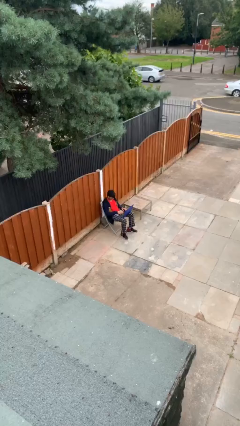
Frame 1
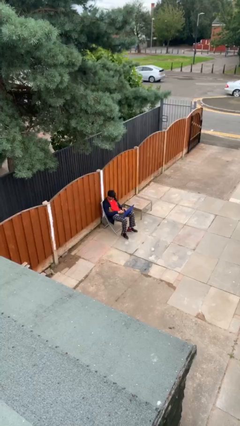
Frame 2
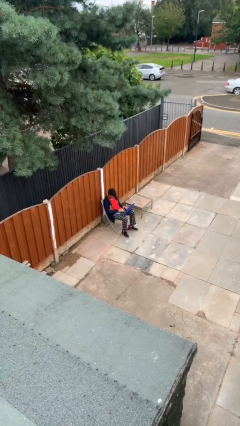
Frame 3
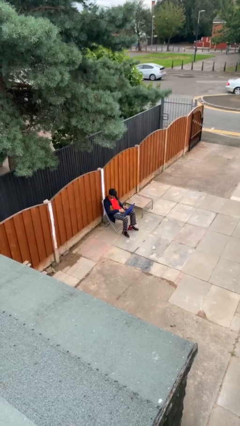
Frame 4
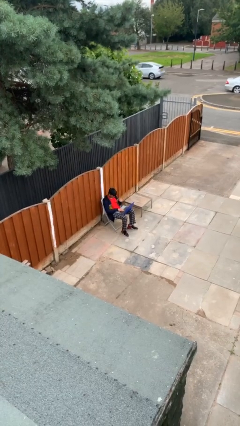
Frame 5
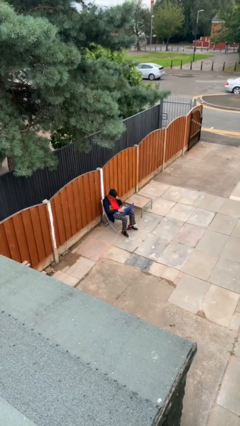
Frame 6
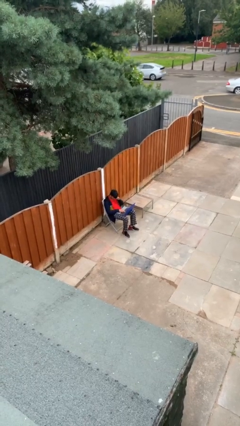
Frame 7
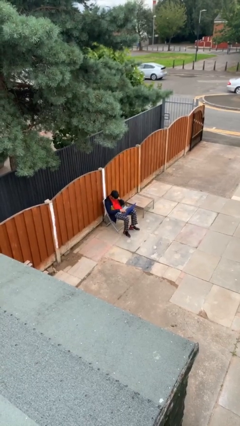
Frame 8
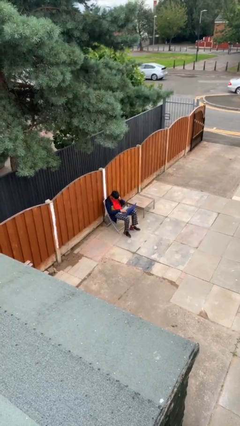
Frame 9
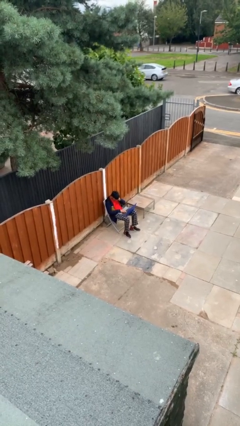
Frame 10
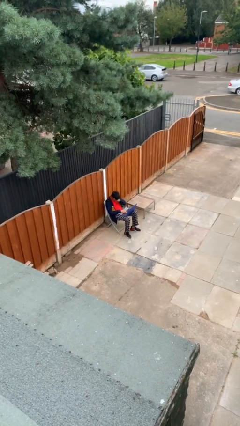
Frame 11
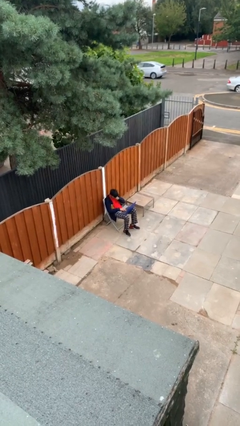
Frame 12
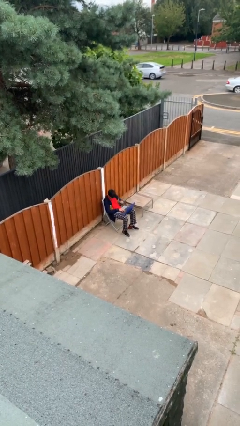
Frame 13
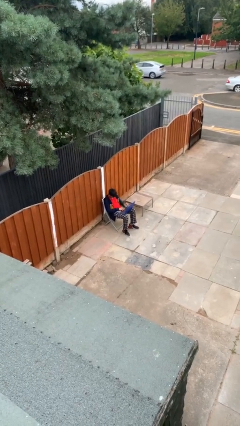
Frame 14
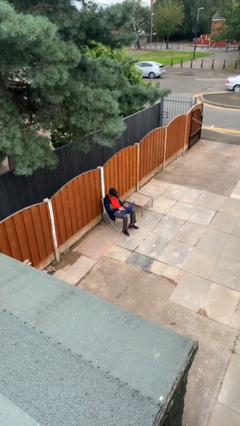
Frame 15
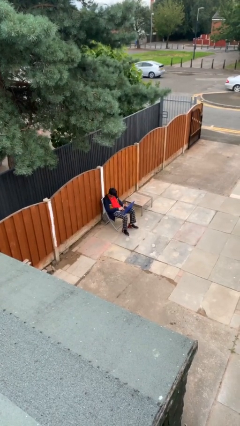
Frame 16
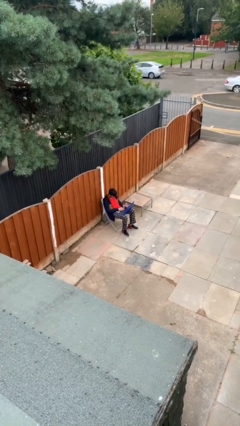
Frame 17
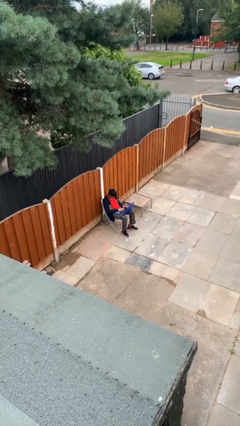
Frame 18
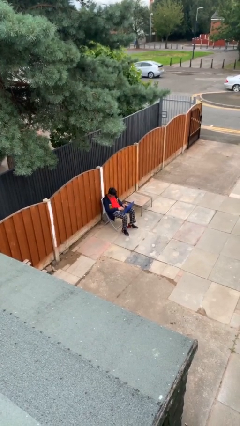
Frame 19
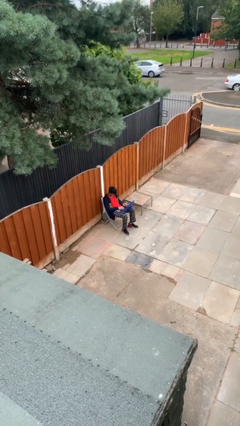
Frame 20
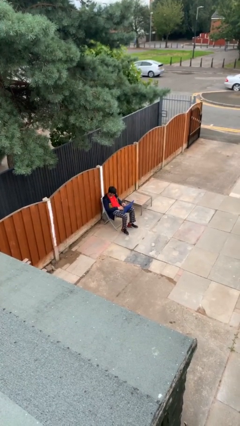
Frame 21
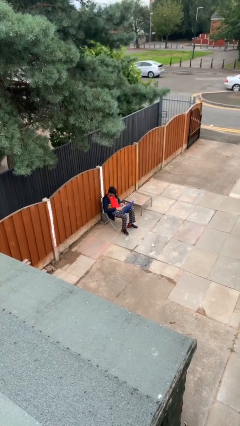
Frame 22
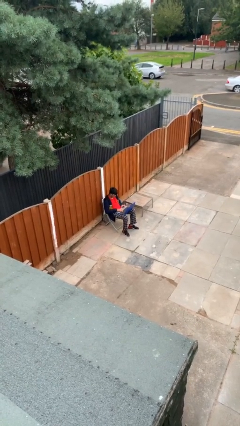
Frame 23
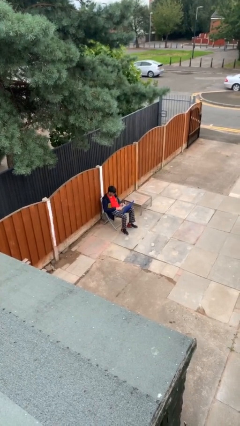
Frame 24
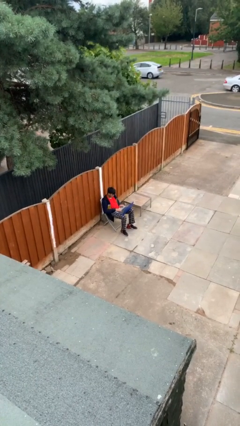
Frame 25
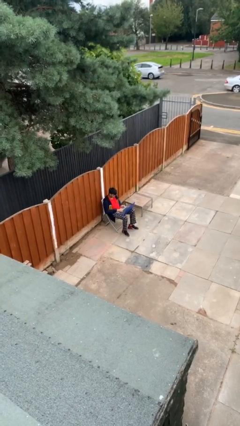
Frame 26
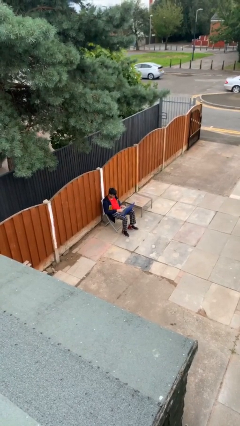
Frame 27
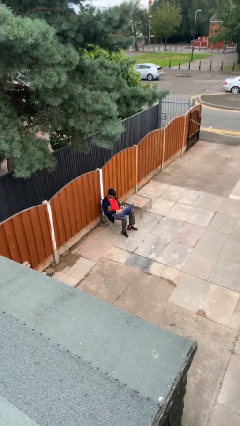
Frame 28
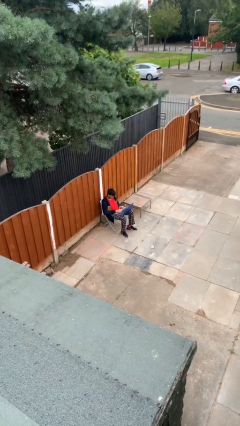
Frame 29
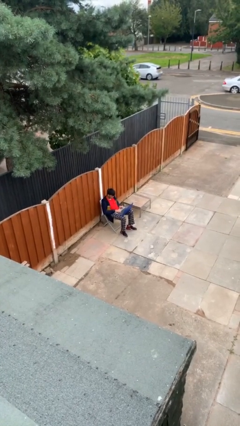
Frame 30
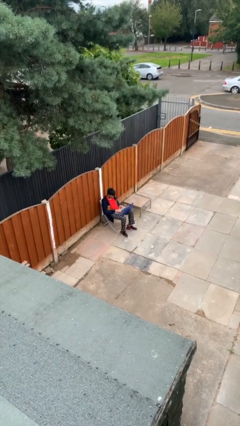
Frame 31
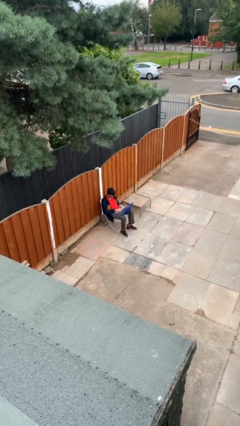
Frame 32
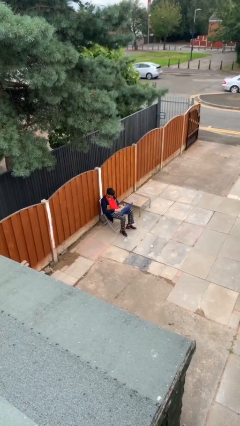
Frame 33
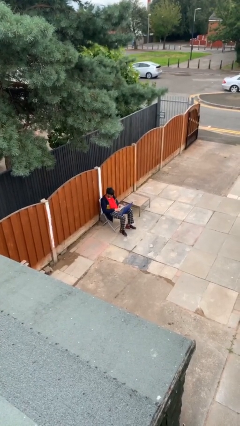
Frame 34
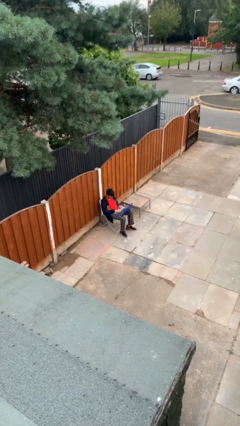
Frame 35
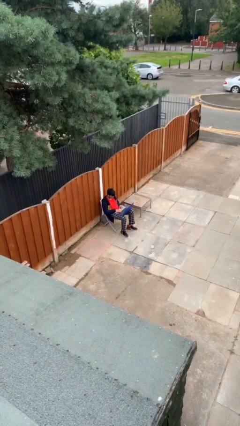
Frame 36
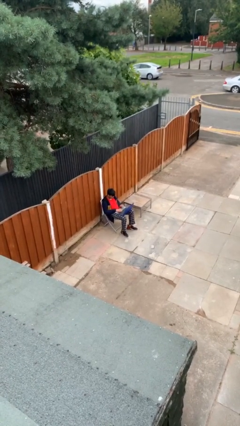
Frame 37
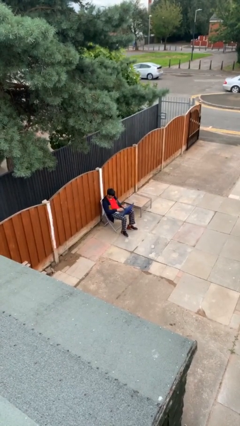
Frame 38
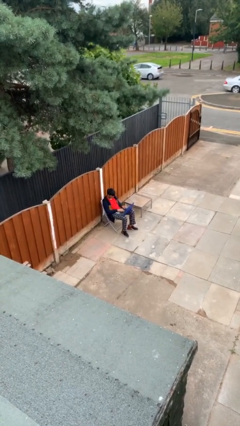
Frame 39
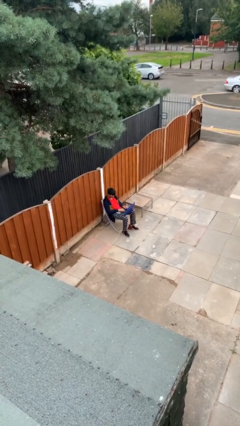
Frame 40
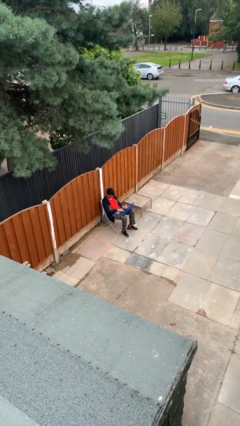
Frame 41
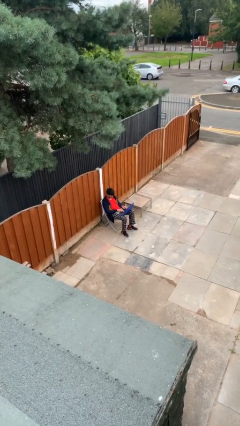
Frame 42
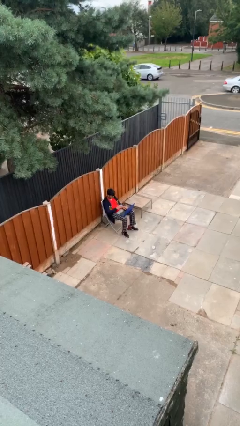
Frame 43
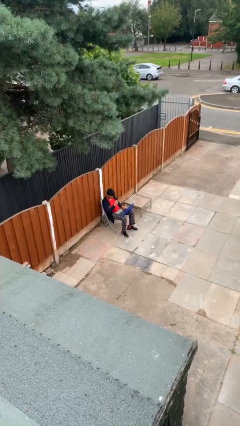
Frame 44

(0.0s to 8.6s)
person interacts with laptop

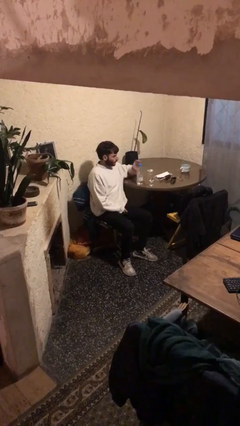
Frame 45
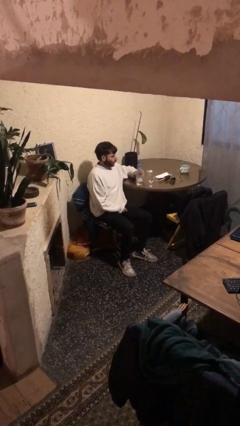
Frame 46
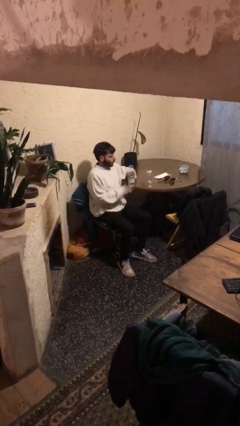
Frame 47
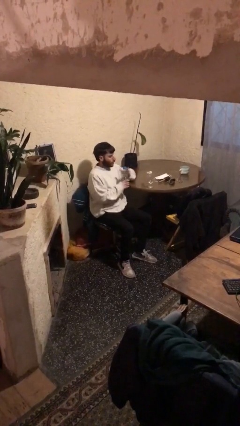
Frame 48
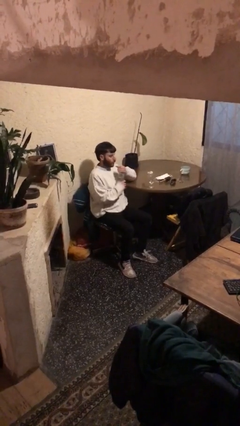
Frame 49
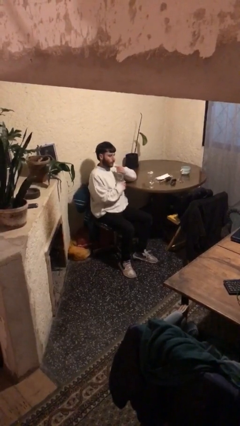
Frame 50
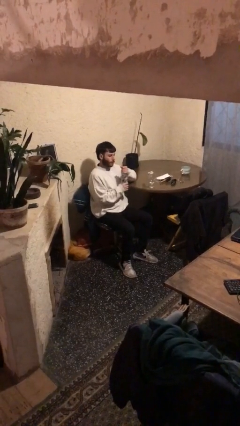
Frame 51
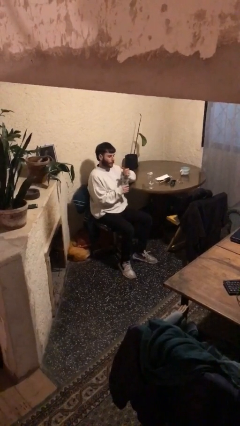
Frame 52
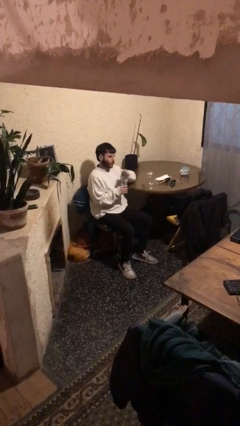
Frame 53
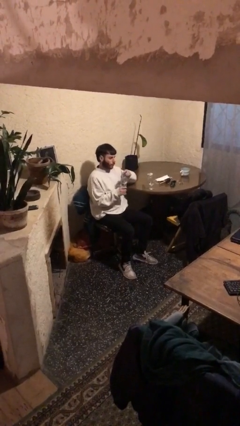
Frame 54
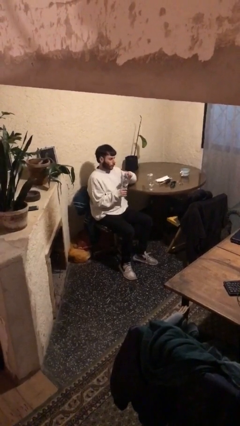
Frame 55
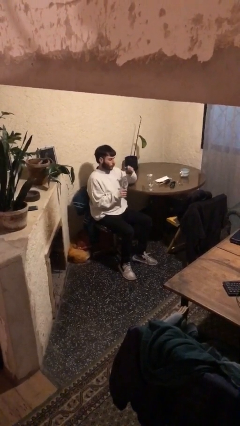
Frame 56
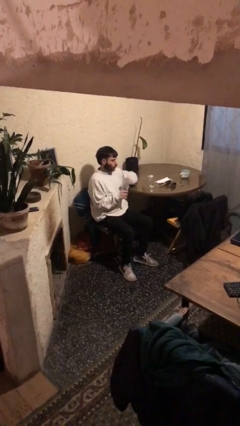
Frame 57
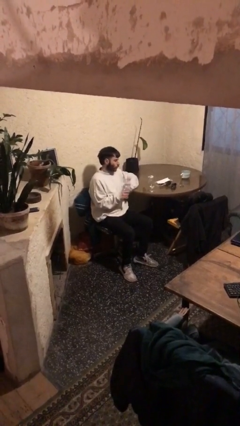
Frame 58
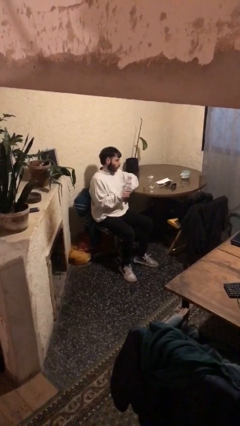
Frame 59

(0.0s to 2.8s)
person unscrews lid from bottle

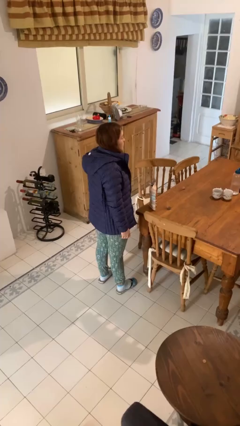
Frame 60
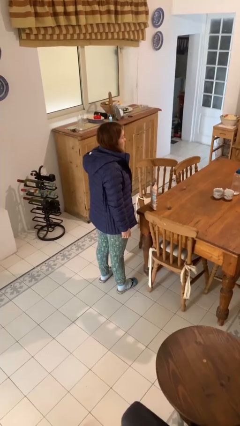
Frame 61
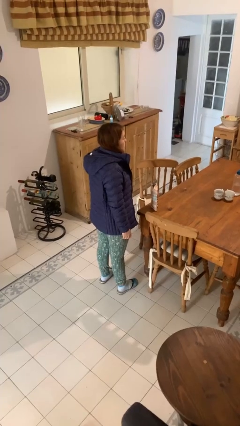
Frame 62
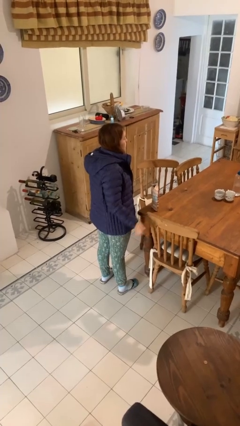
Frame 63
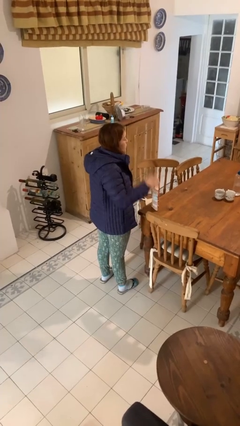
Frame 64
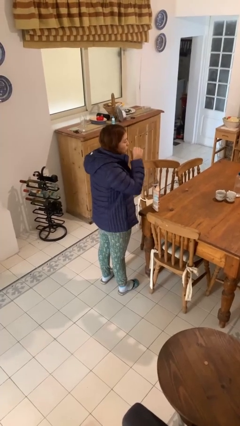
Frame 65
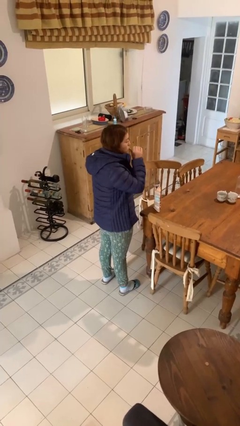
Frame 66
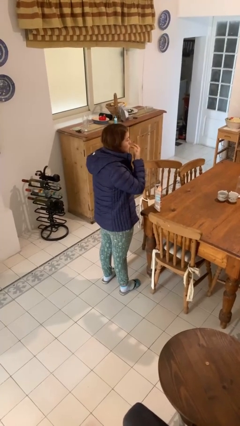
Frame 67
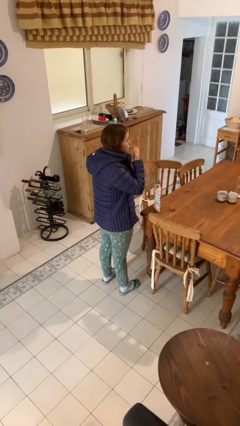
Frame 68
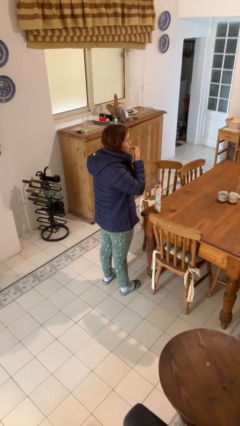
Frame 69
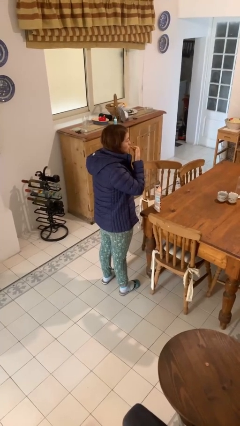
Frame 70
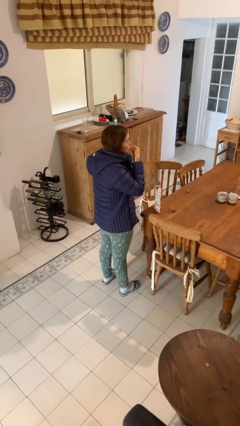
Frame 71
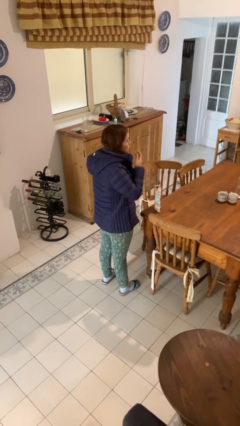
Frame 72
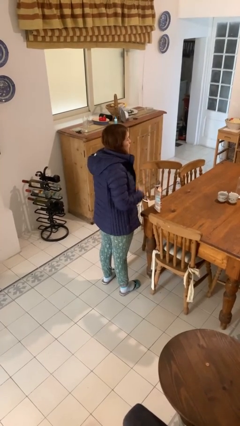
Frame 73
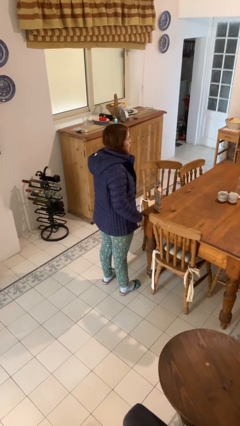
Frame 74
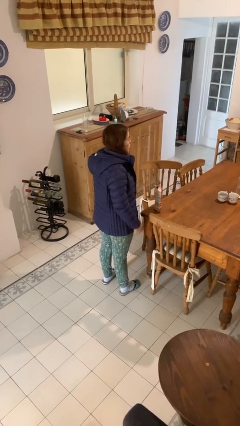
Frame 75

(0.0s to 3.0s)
person licks fingers

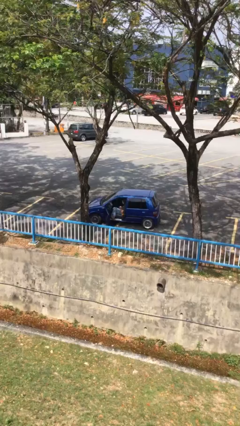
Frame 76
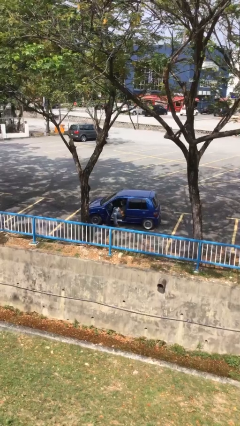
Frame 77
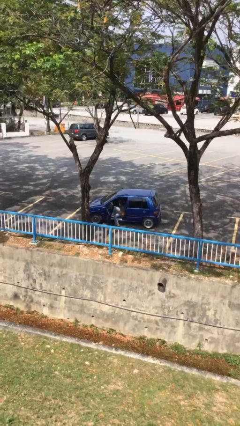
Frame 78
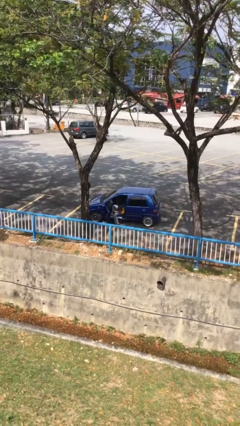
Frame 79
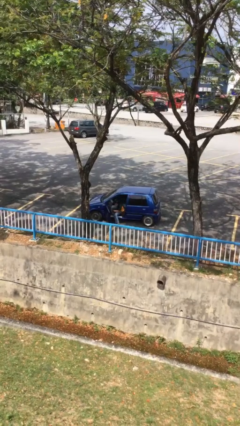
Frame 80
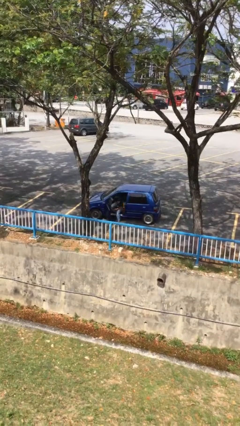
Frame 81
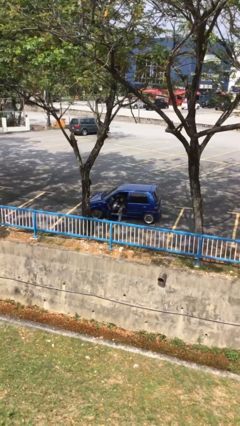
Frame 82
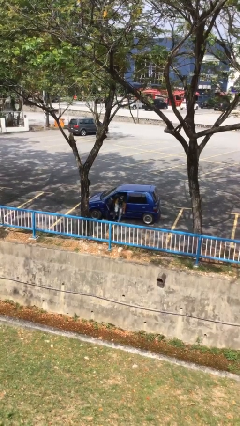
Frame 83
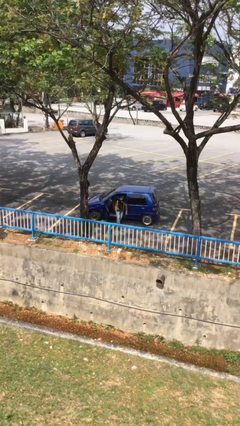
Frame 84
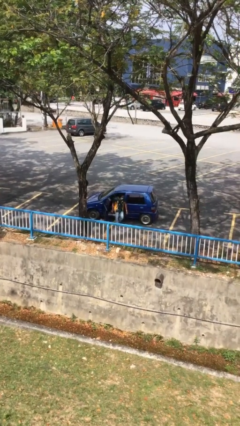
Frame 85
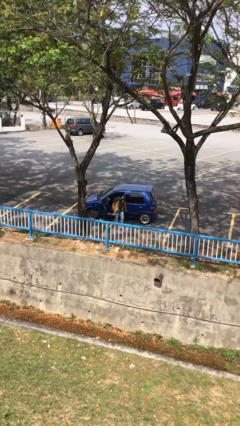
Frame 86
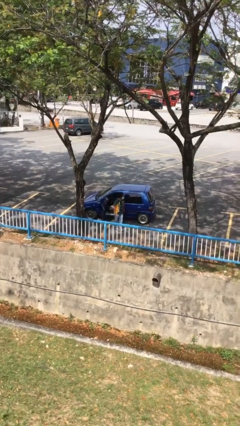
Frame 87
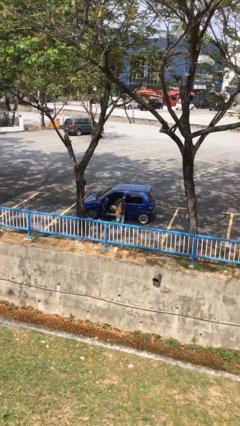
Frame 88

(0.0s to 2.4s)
person exits car

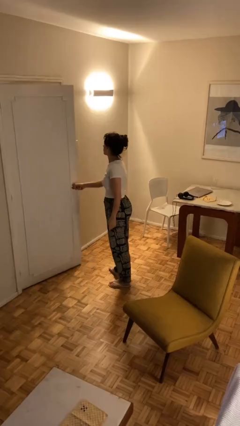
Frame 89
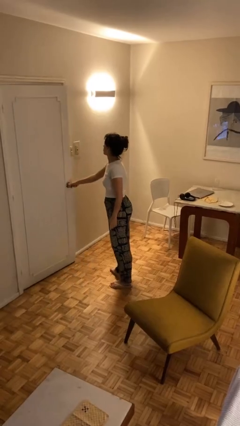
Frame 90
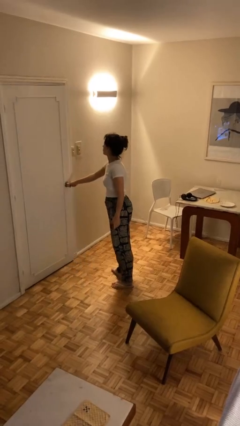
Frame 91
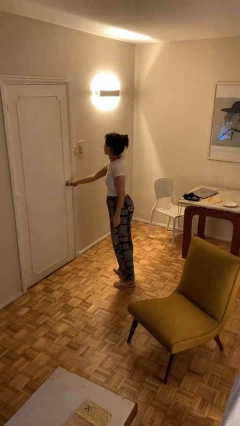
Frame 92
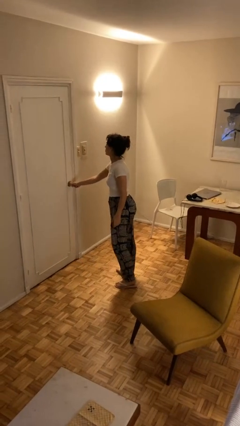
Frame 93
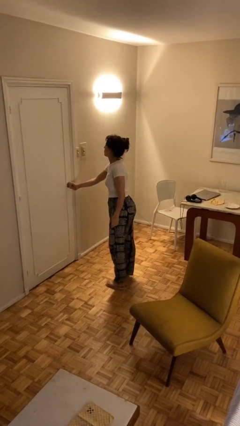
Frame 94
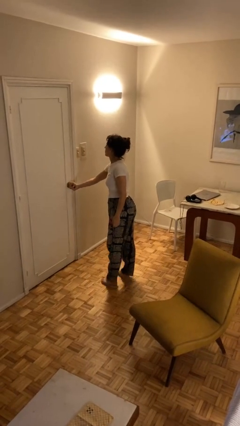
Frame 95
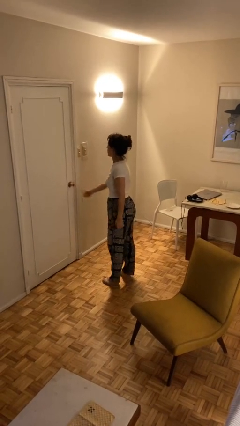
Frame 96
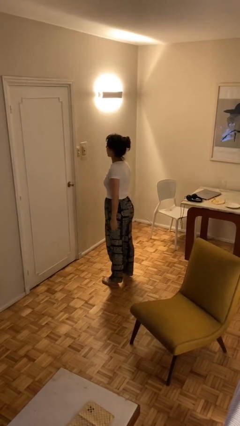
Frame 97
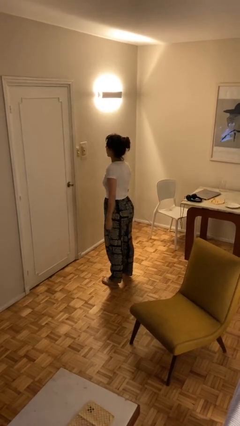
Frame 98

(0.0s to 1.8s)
person closes facility door
